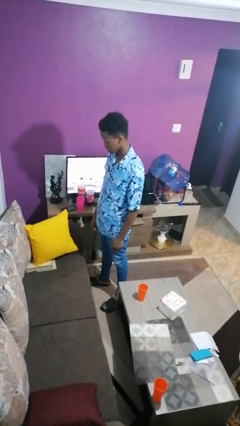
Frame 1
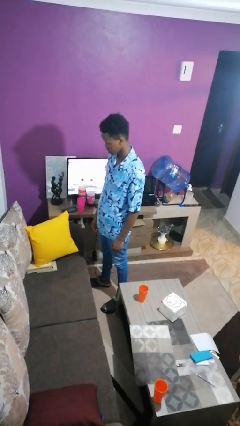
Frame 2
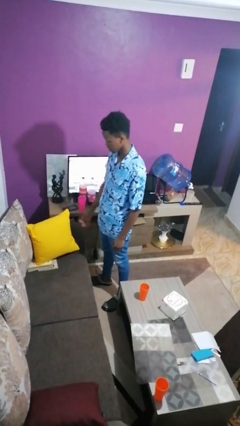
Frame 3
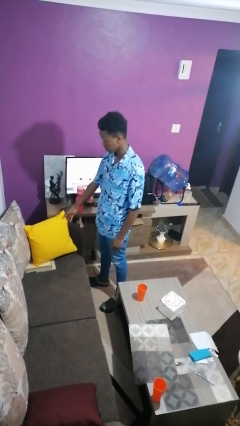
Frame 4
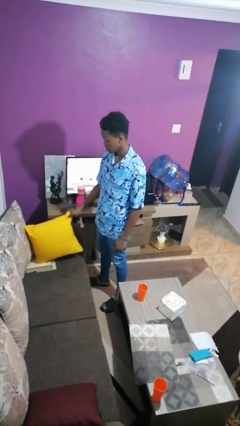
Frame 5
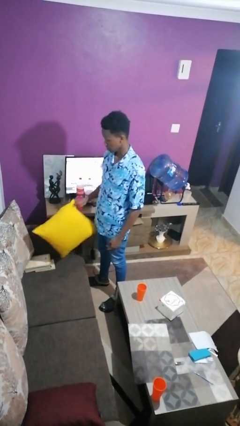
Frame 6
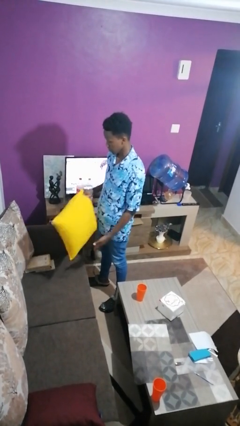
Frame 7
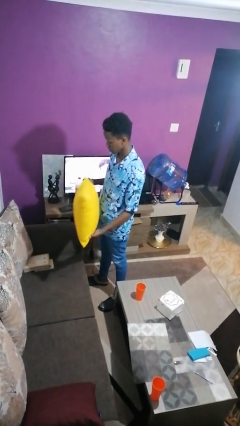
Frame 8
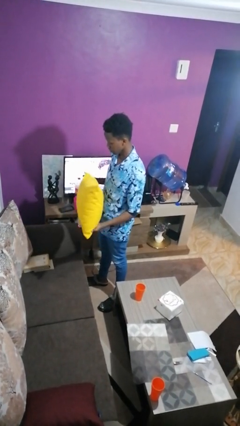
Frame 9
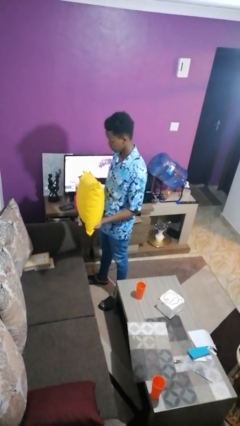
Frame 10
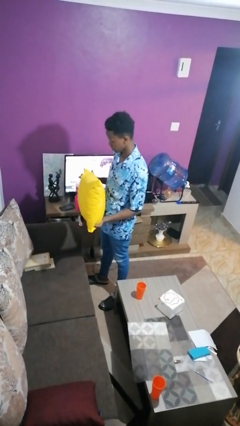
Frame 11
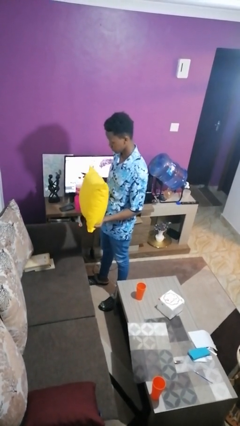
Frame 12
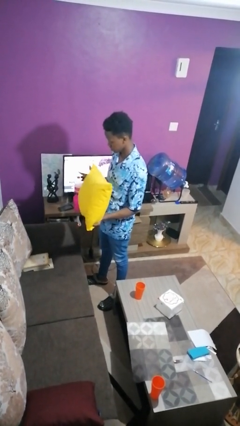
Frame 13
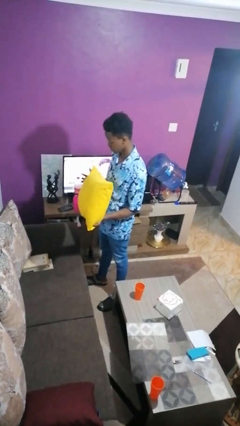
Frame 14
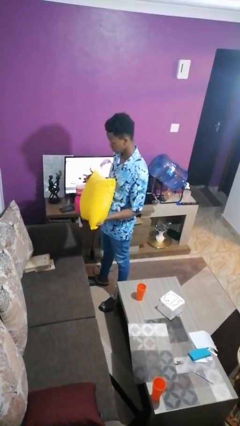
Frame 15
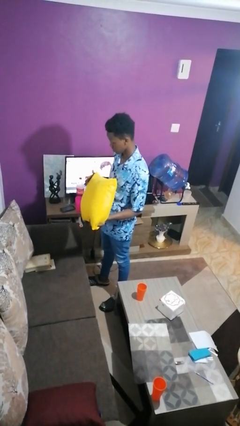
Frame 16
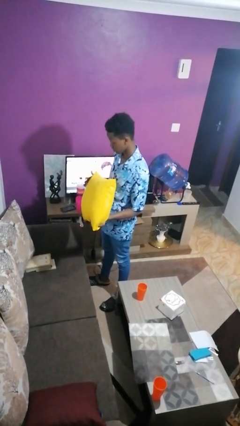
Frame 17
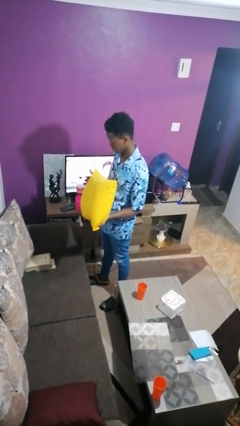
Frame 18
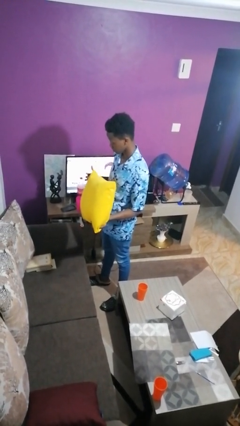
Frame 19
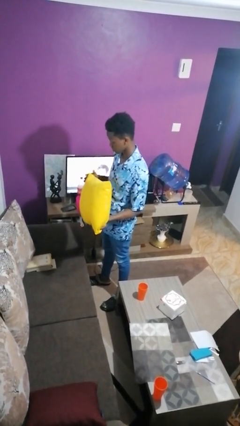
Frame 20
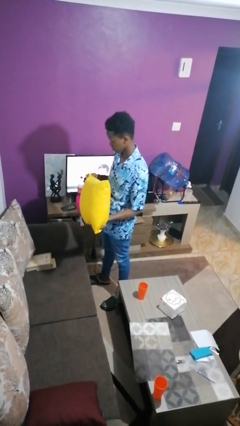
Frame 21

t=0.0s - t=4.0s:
person picks up object from couch

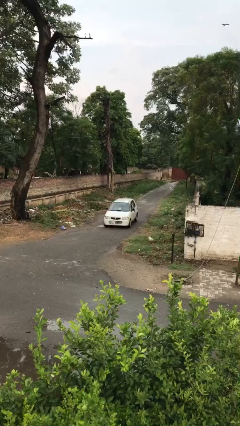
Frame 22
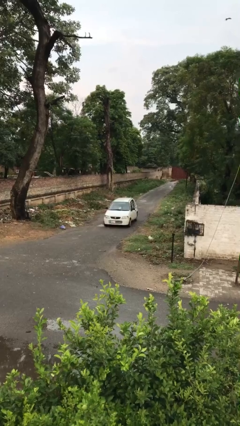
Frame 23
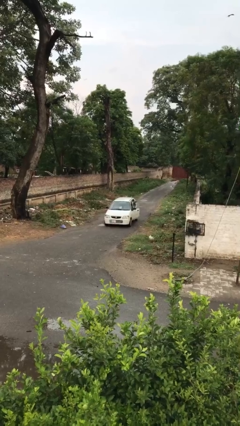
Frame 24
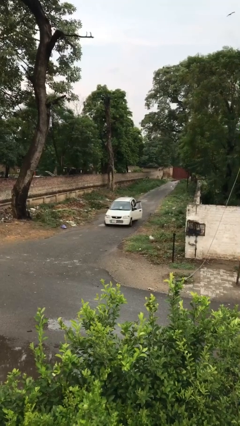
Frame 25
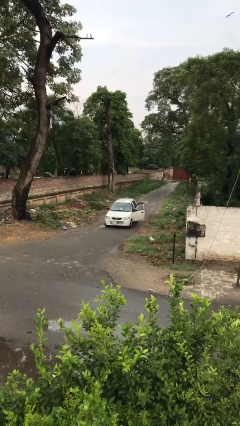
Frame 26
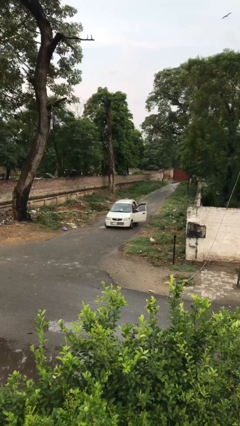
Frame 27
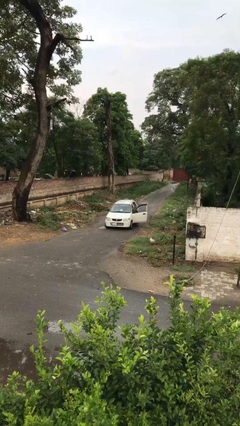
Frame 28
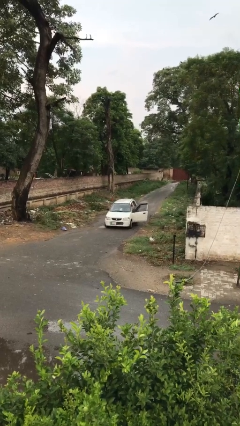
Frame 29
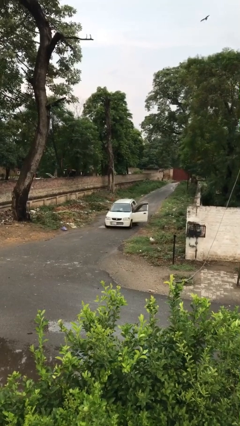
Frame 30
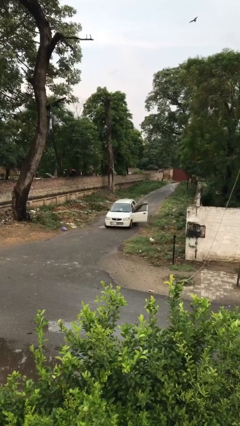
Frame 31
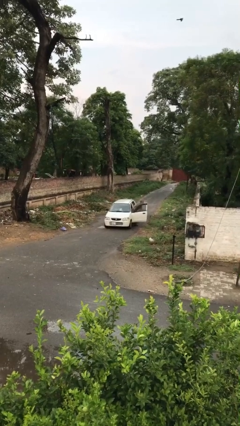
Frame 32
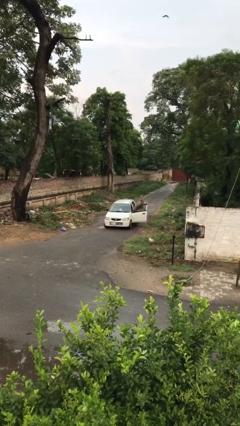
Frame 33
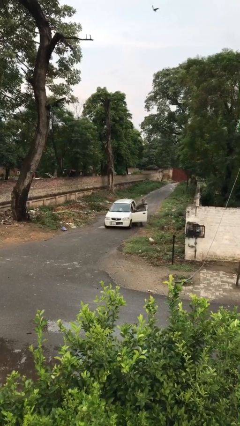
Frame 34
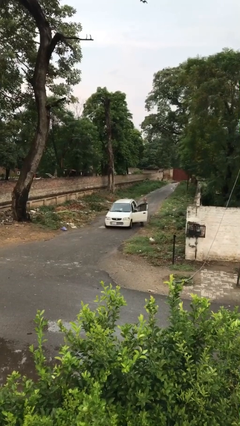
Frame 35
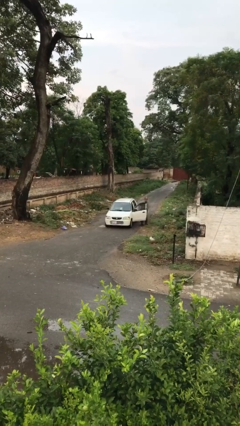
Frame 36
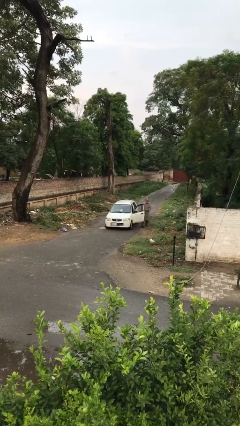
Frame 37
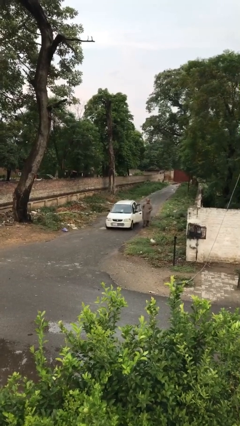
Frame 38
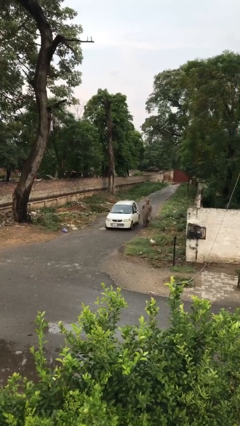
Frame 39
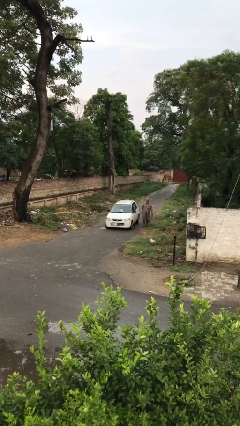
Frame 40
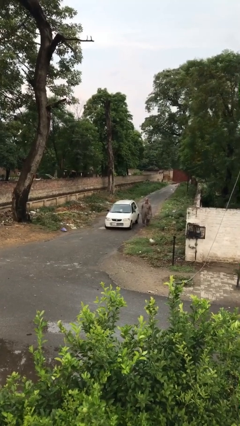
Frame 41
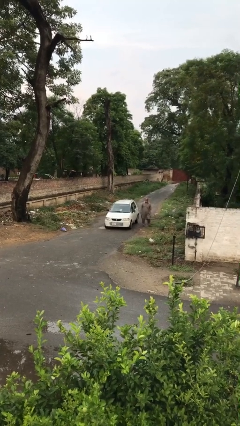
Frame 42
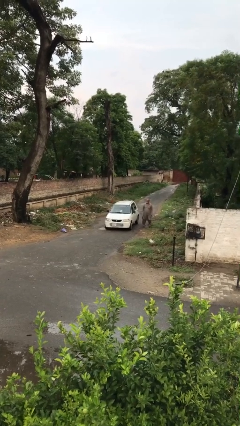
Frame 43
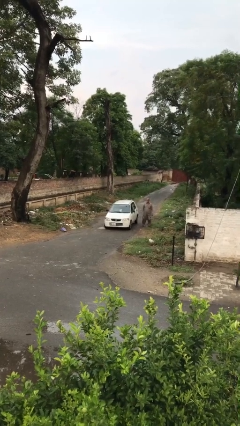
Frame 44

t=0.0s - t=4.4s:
car drops off person

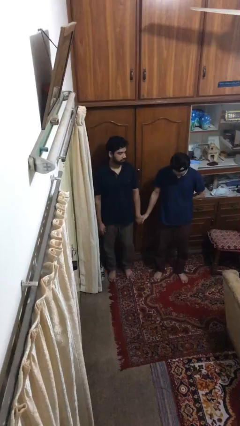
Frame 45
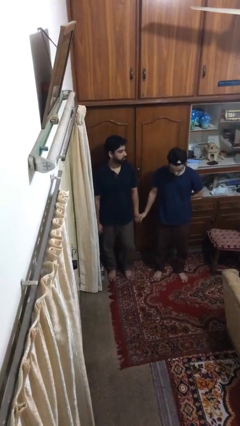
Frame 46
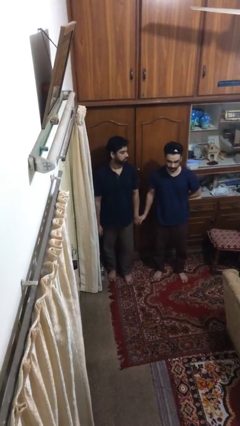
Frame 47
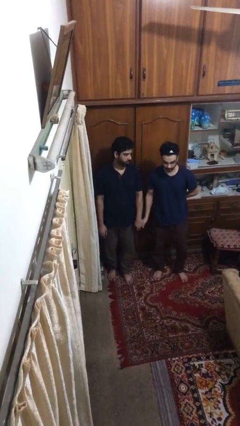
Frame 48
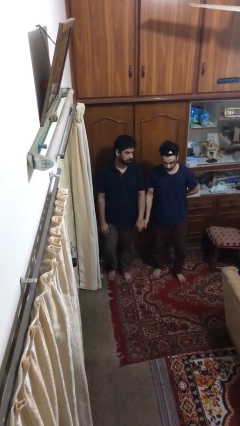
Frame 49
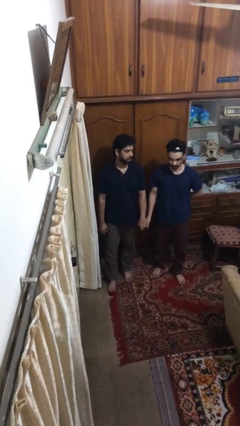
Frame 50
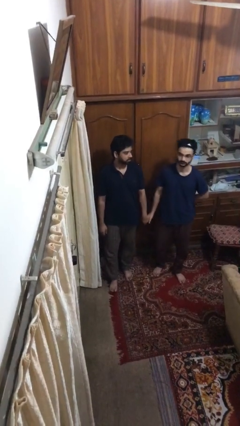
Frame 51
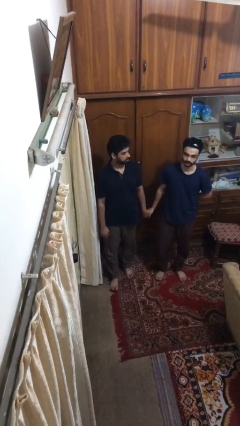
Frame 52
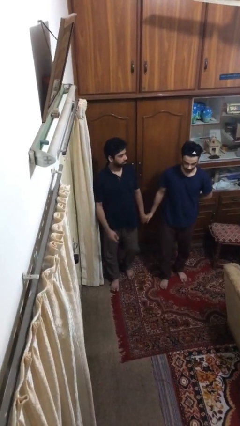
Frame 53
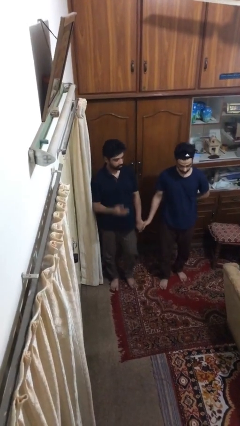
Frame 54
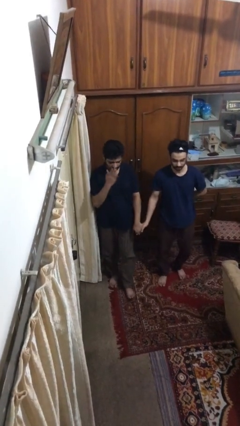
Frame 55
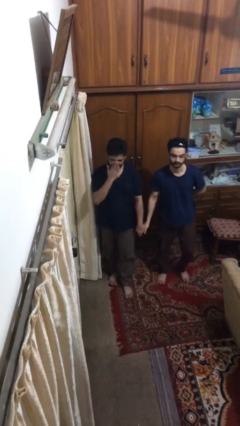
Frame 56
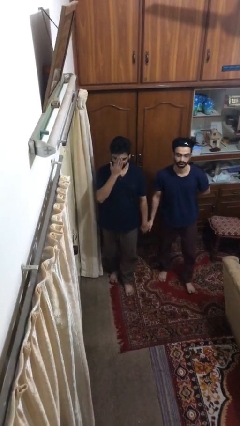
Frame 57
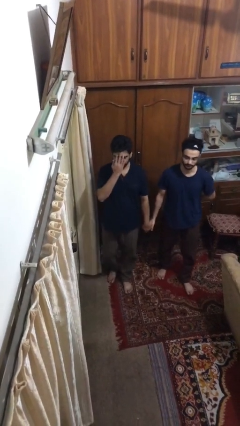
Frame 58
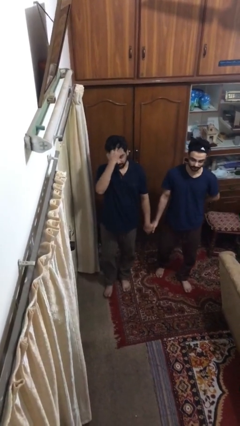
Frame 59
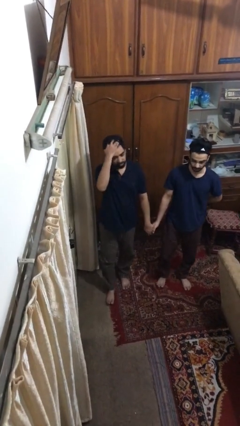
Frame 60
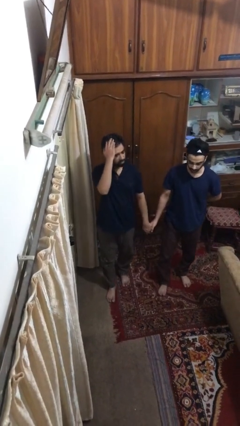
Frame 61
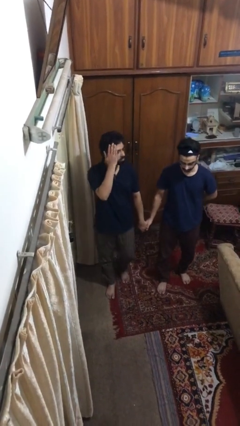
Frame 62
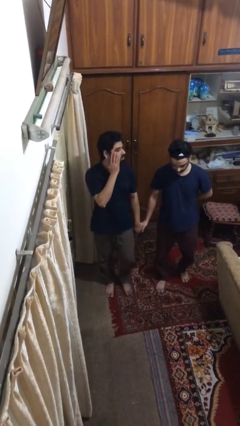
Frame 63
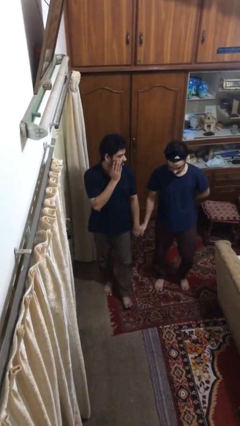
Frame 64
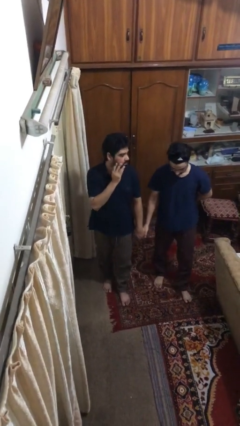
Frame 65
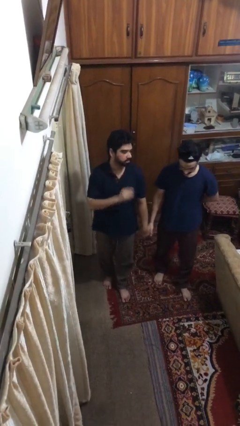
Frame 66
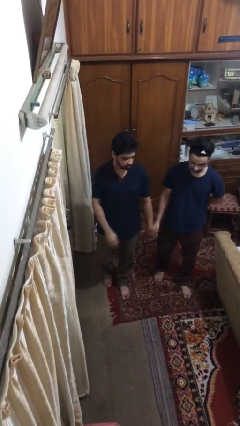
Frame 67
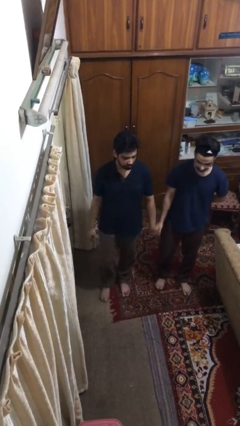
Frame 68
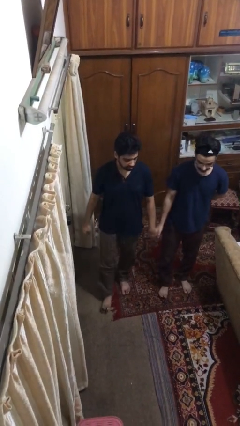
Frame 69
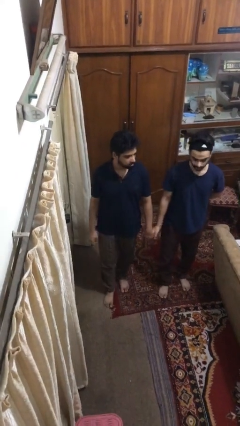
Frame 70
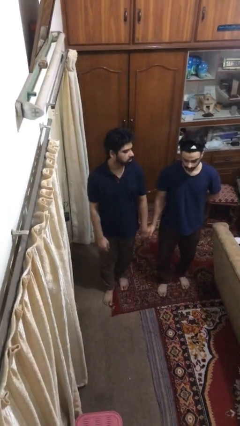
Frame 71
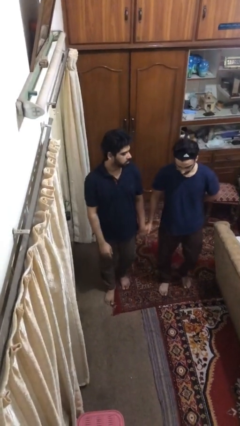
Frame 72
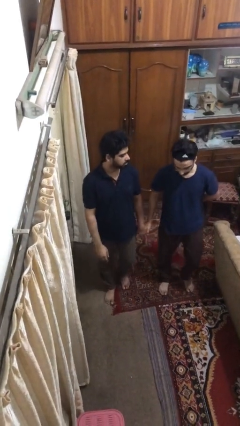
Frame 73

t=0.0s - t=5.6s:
person holds hand

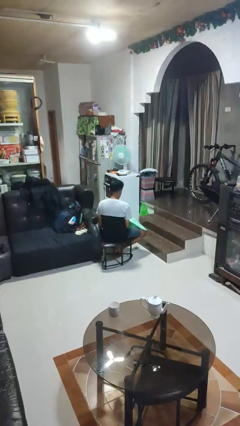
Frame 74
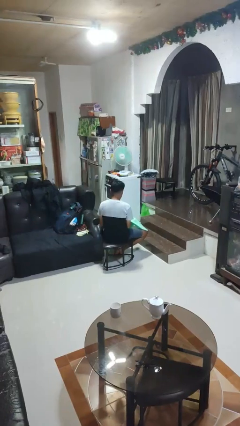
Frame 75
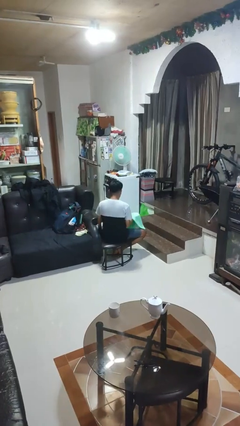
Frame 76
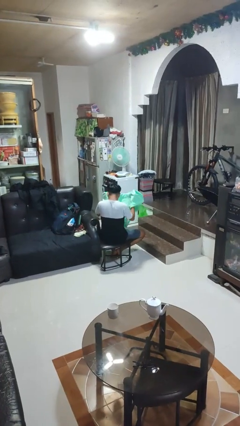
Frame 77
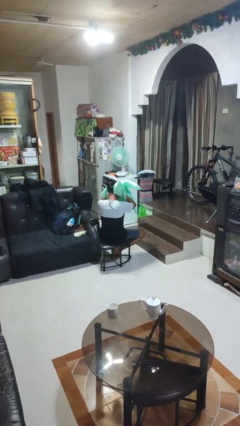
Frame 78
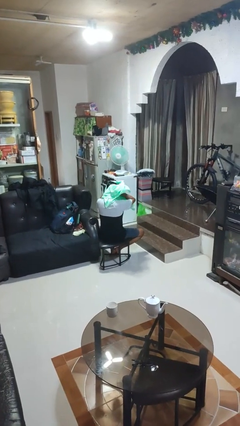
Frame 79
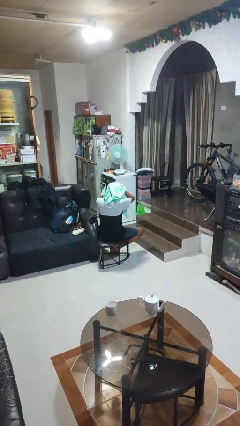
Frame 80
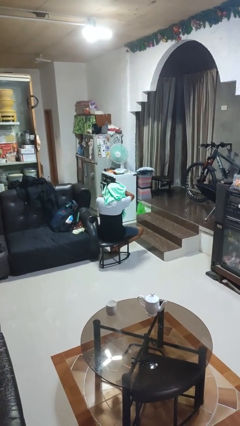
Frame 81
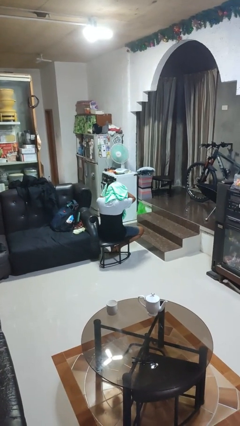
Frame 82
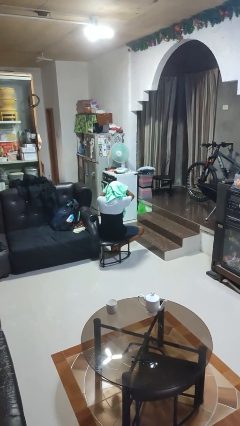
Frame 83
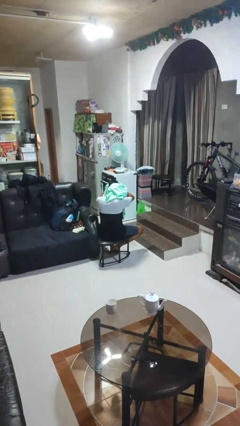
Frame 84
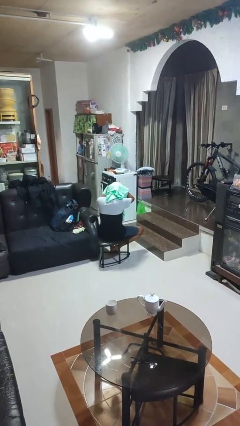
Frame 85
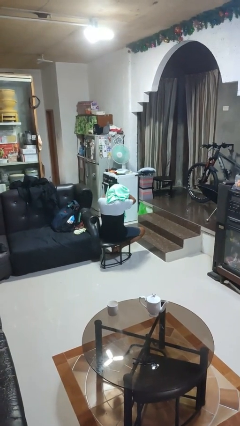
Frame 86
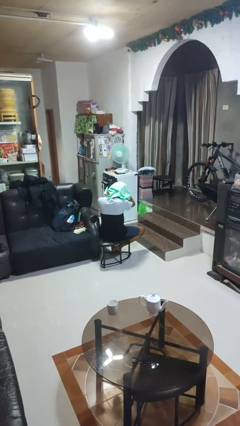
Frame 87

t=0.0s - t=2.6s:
person dries hair with towel

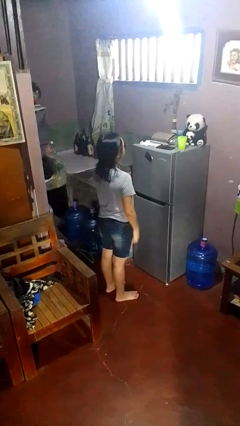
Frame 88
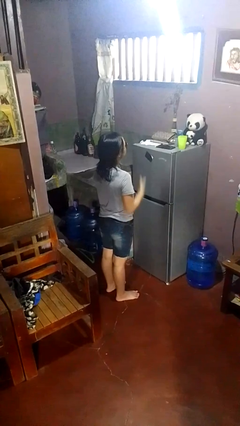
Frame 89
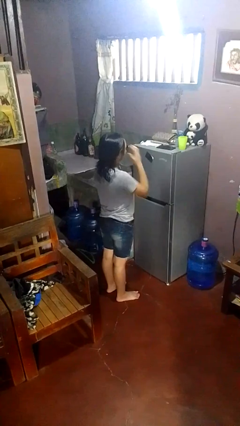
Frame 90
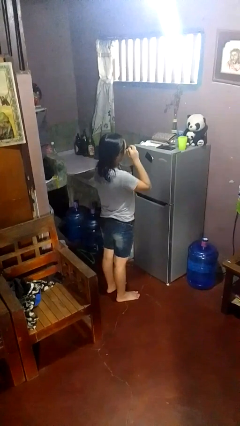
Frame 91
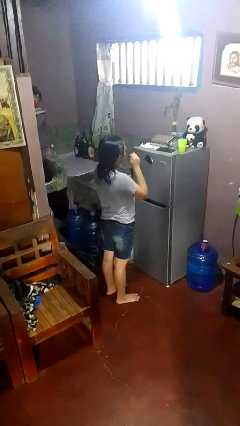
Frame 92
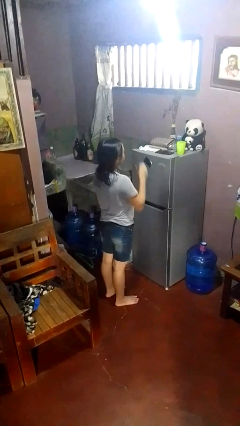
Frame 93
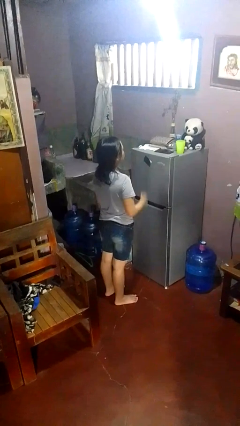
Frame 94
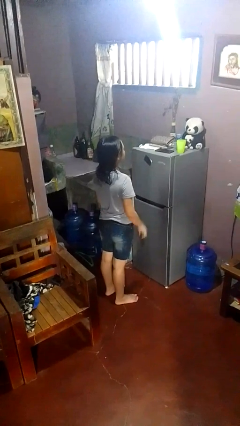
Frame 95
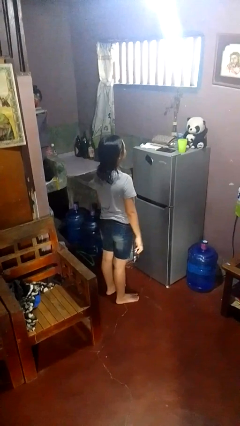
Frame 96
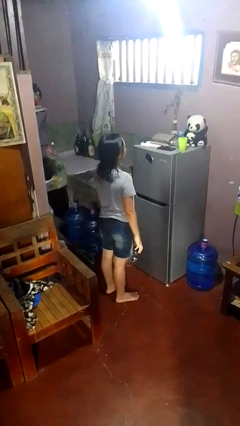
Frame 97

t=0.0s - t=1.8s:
person takes off sunglasses
